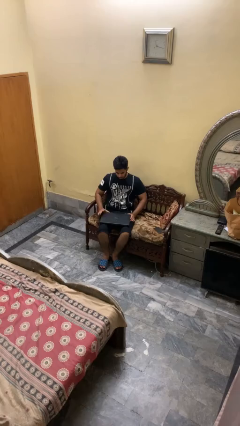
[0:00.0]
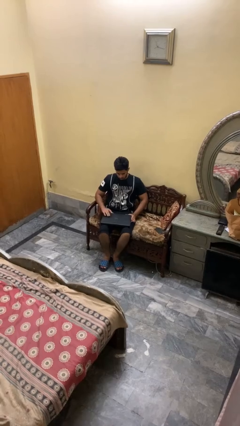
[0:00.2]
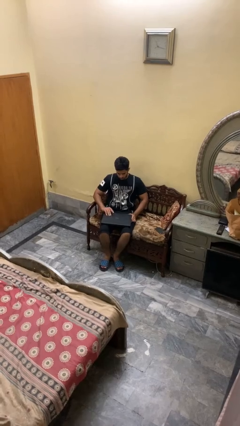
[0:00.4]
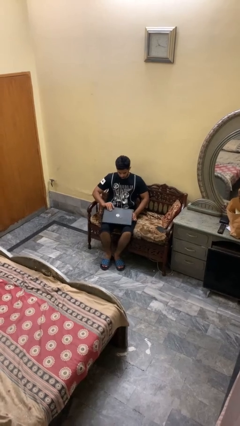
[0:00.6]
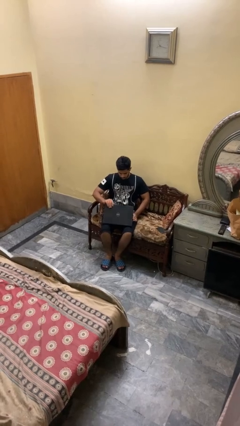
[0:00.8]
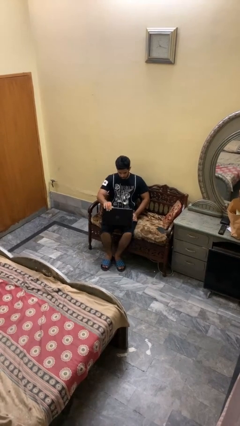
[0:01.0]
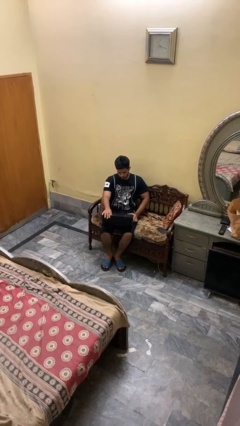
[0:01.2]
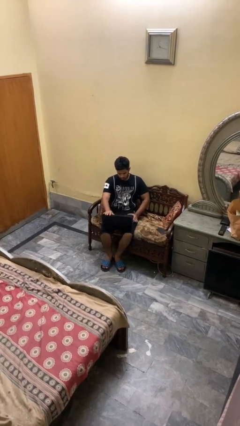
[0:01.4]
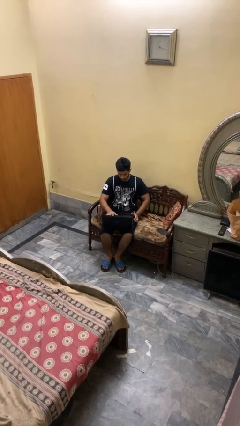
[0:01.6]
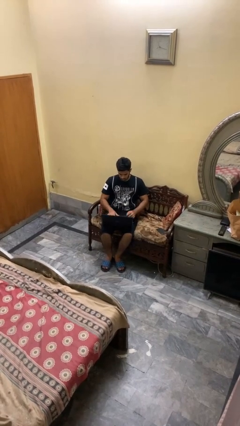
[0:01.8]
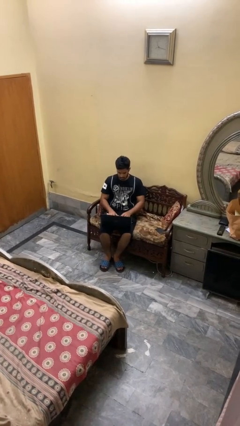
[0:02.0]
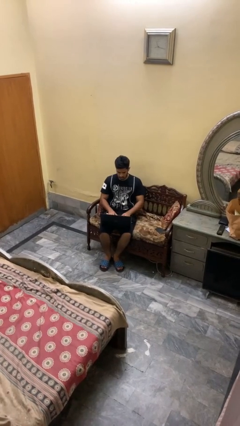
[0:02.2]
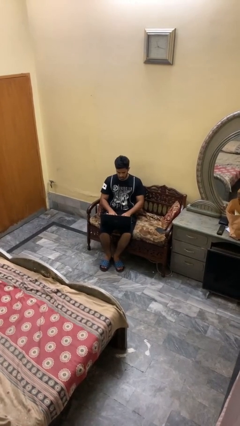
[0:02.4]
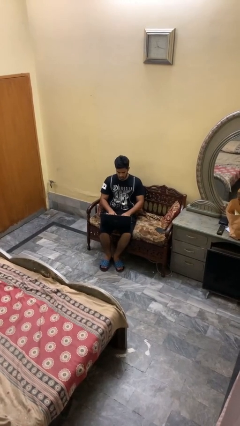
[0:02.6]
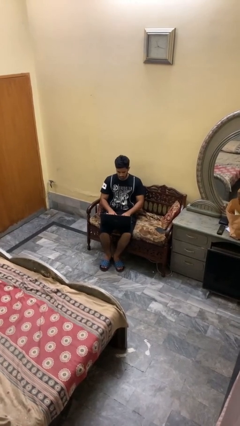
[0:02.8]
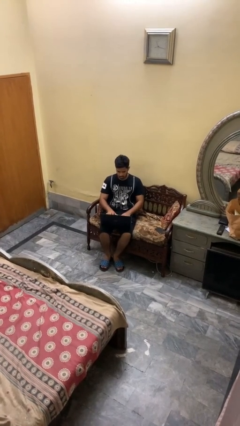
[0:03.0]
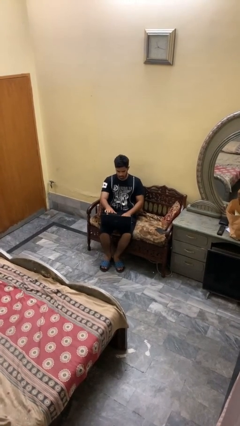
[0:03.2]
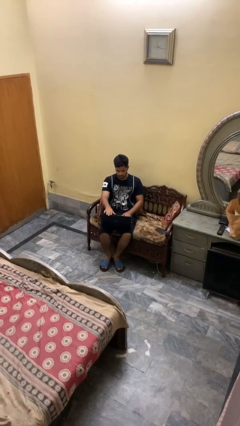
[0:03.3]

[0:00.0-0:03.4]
person opens laptop

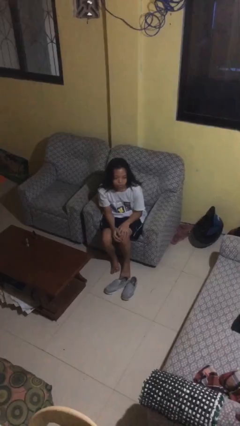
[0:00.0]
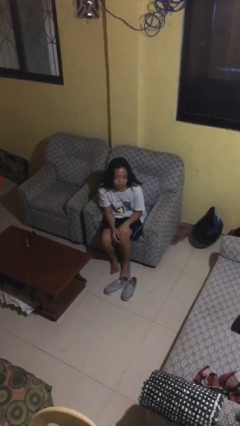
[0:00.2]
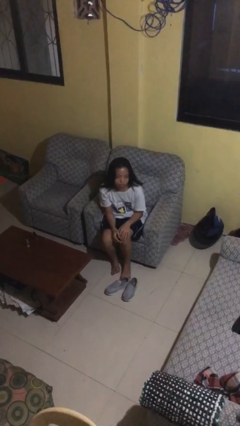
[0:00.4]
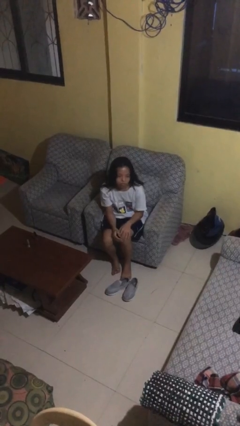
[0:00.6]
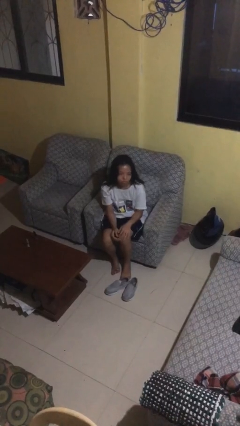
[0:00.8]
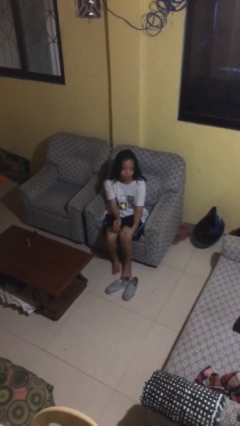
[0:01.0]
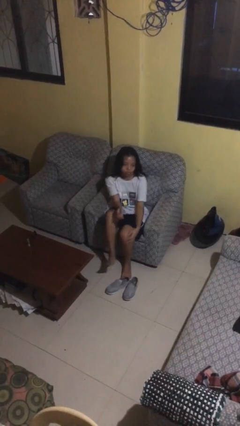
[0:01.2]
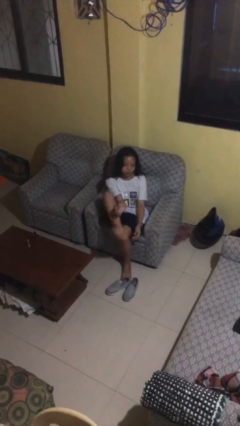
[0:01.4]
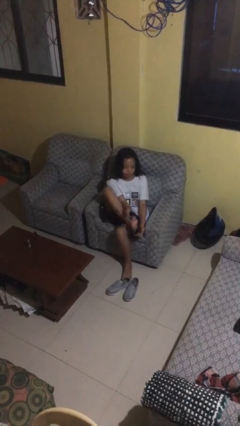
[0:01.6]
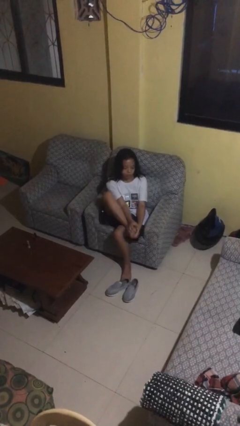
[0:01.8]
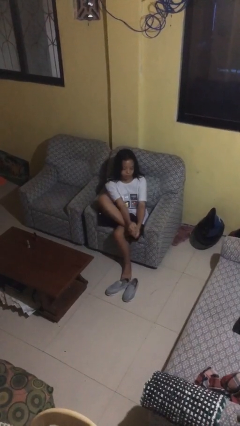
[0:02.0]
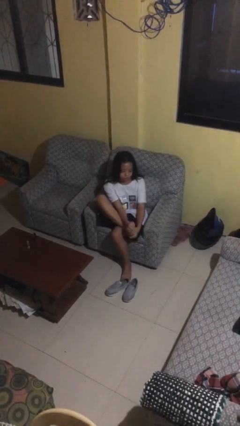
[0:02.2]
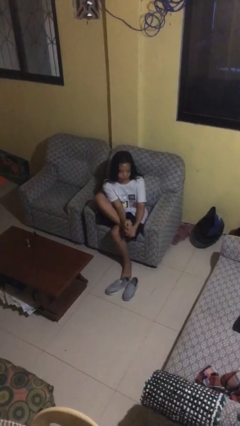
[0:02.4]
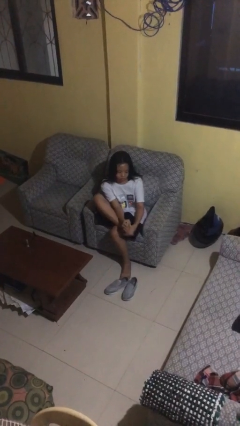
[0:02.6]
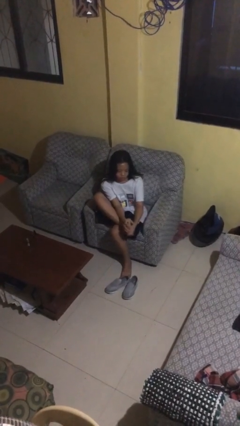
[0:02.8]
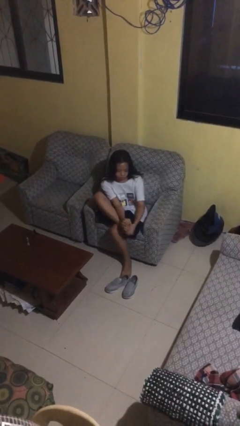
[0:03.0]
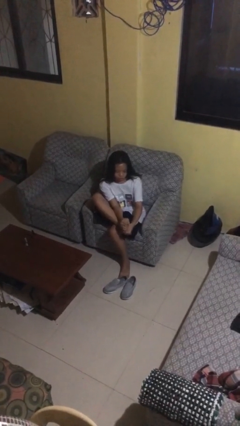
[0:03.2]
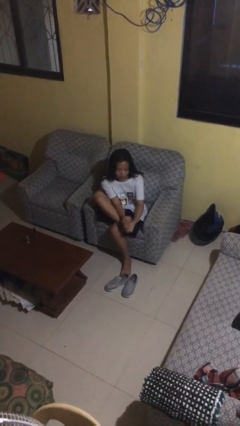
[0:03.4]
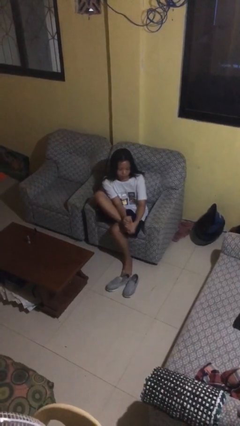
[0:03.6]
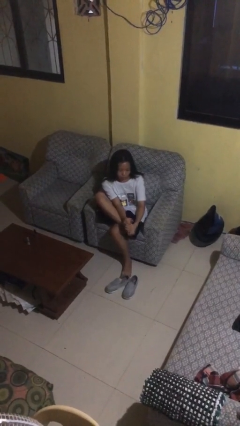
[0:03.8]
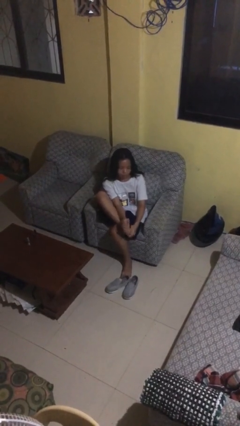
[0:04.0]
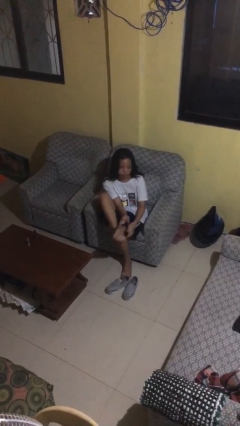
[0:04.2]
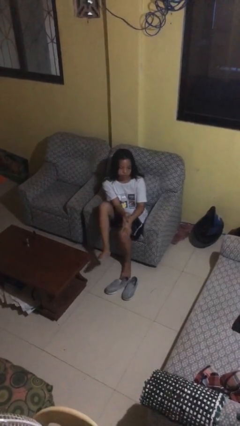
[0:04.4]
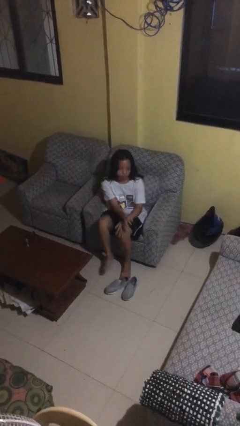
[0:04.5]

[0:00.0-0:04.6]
person rubs foot

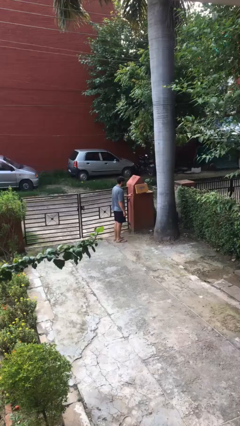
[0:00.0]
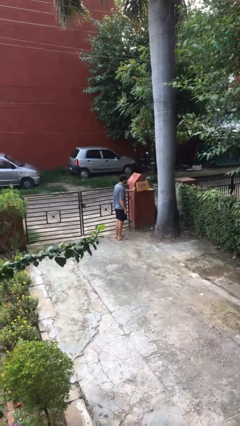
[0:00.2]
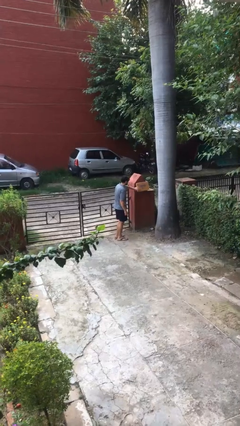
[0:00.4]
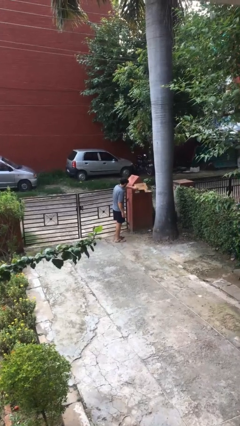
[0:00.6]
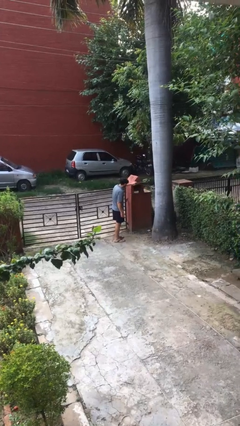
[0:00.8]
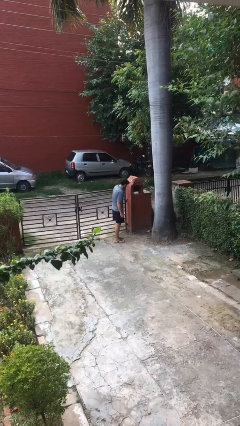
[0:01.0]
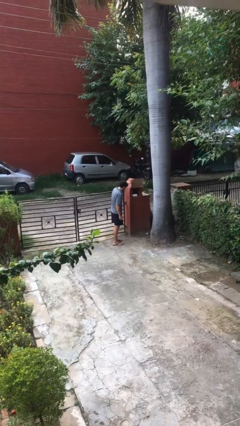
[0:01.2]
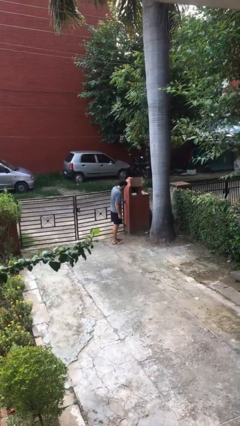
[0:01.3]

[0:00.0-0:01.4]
person opens mailbox

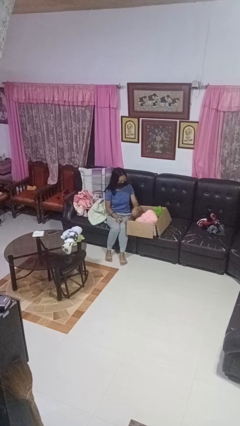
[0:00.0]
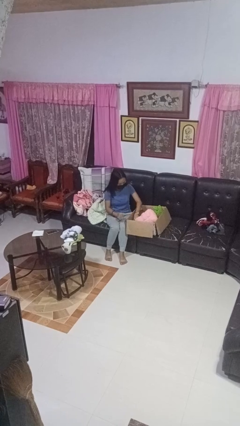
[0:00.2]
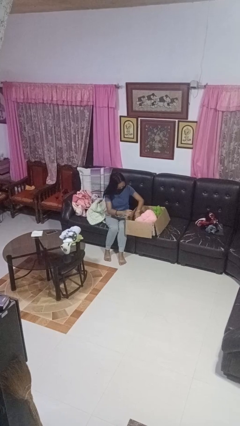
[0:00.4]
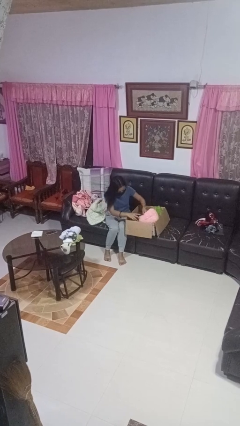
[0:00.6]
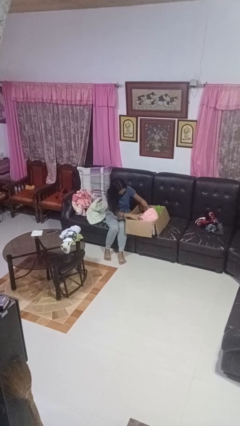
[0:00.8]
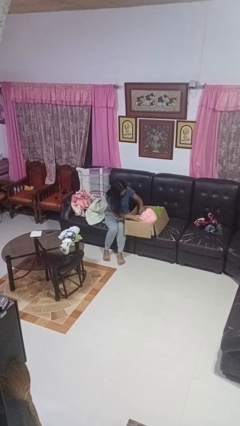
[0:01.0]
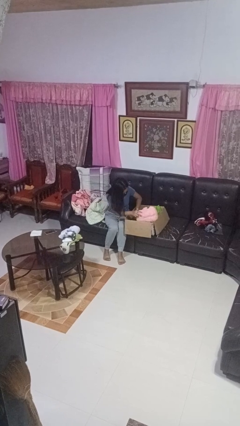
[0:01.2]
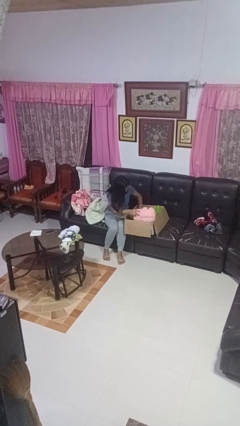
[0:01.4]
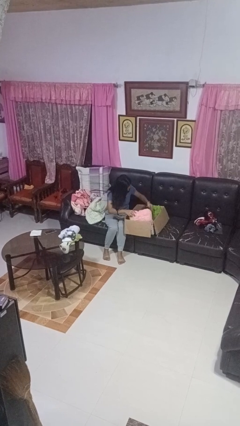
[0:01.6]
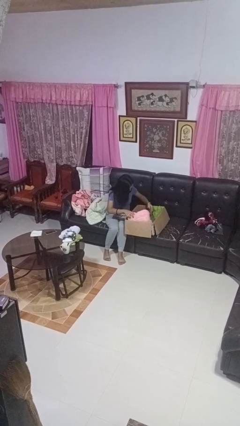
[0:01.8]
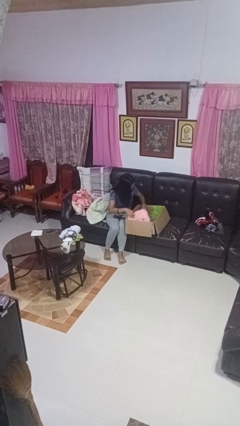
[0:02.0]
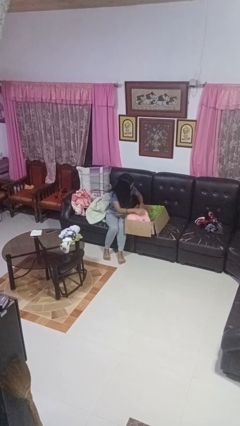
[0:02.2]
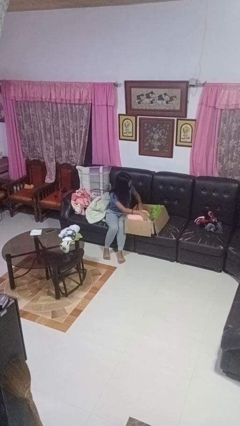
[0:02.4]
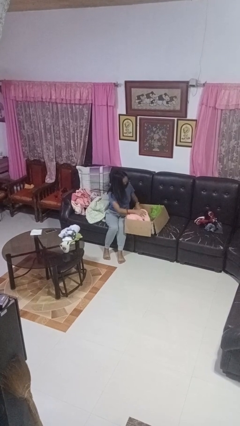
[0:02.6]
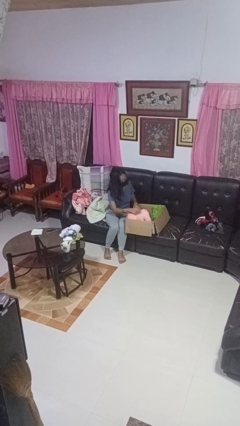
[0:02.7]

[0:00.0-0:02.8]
person searches in box

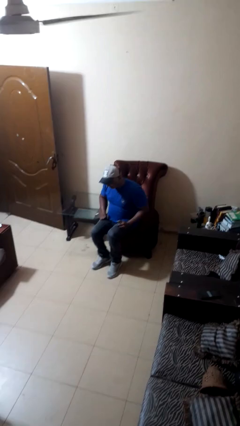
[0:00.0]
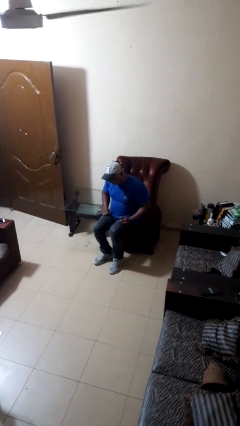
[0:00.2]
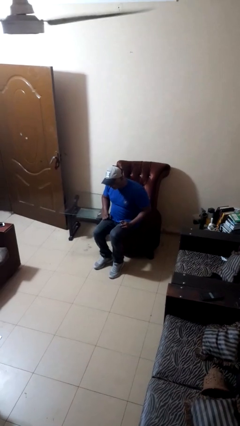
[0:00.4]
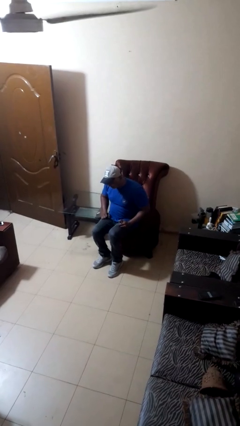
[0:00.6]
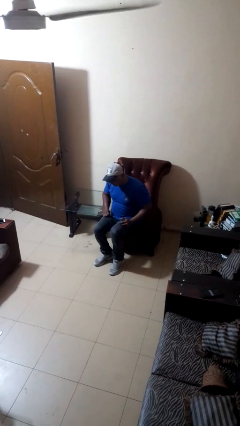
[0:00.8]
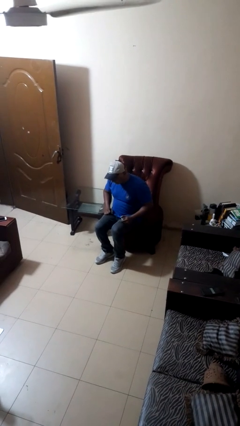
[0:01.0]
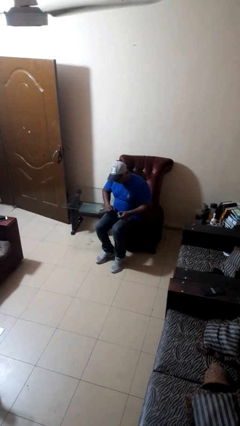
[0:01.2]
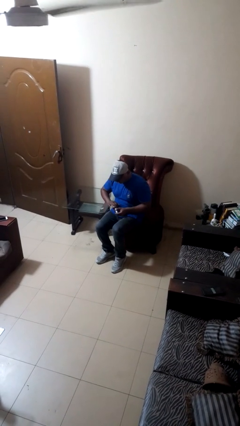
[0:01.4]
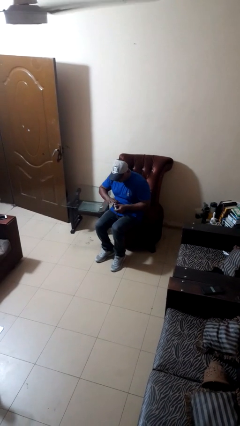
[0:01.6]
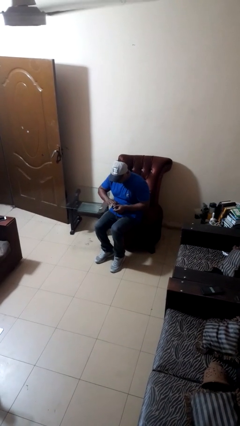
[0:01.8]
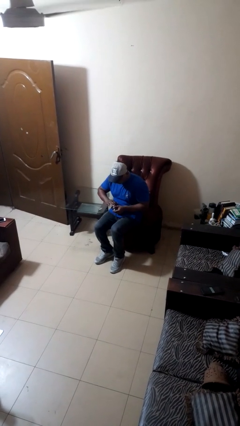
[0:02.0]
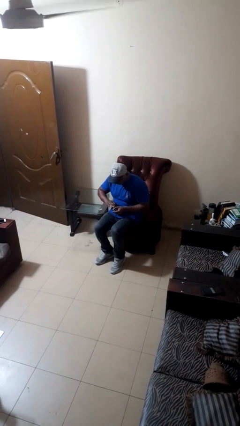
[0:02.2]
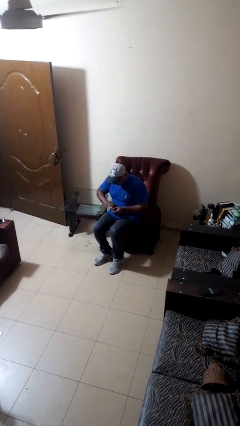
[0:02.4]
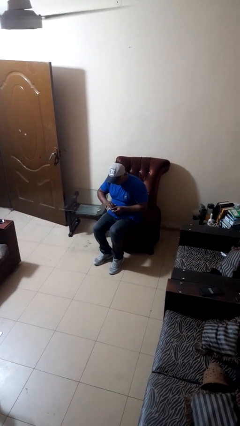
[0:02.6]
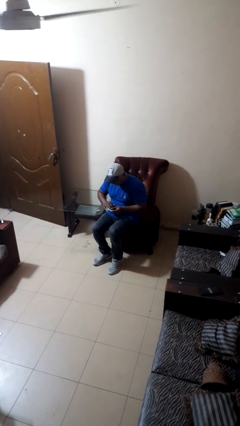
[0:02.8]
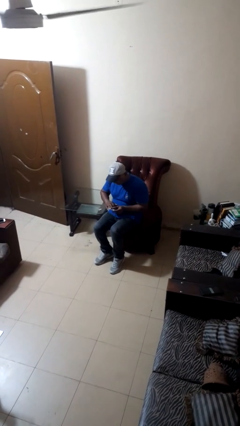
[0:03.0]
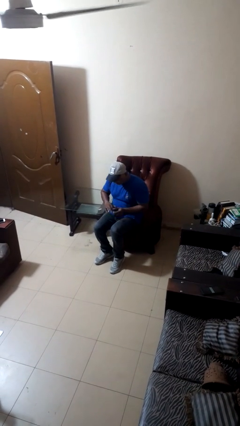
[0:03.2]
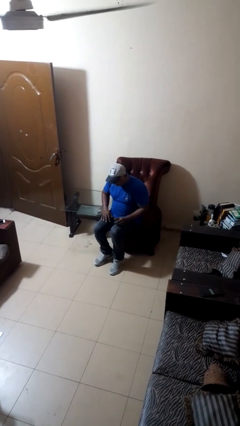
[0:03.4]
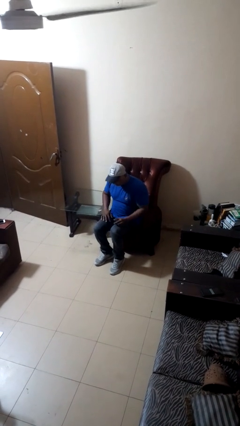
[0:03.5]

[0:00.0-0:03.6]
person clips fingernails

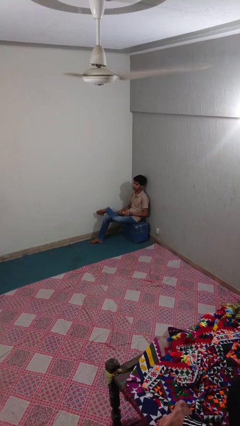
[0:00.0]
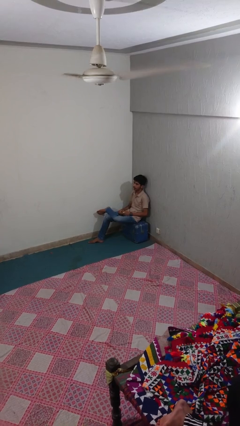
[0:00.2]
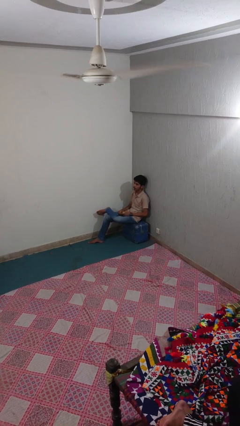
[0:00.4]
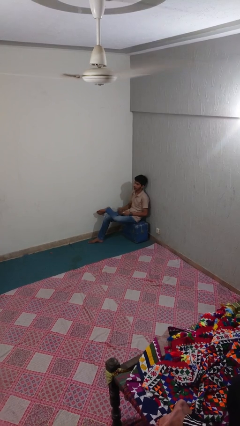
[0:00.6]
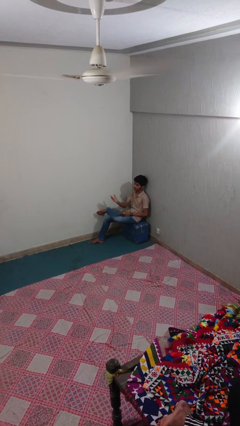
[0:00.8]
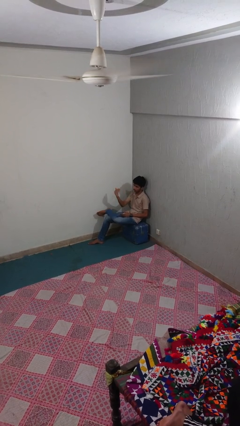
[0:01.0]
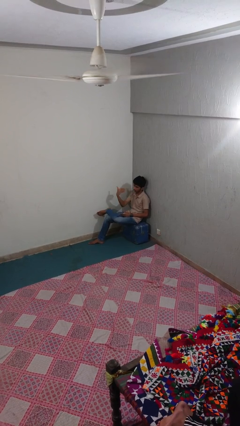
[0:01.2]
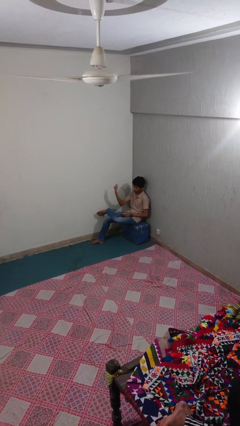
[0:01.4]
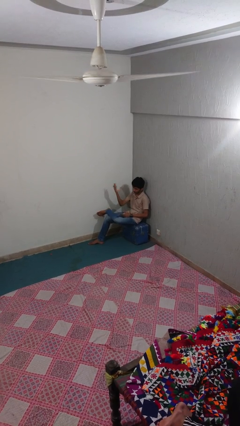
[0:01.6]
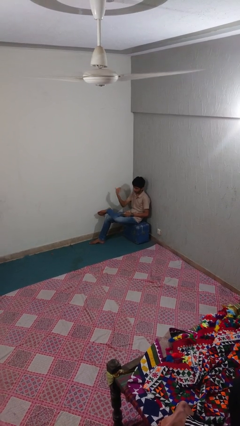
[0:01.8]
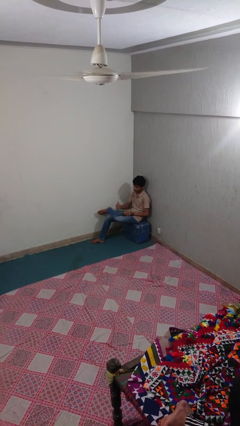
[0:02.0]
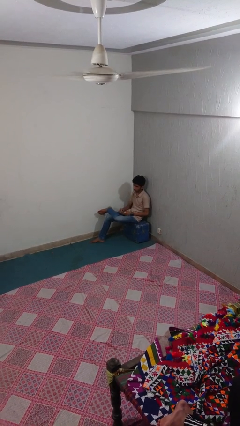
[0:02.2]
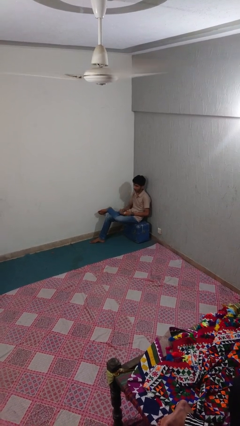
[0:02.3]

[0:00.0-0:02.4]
person gestures come here
